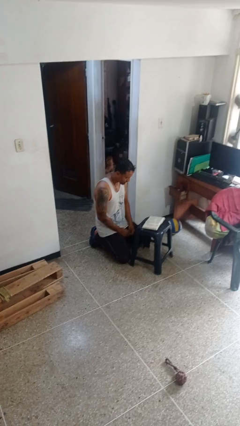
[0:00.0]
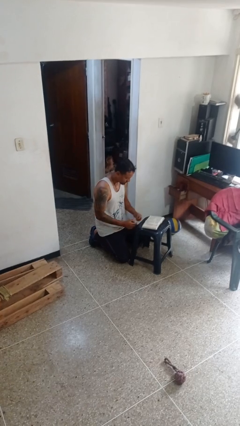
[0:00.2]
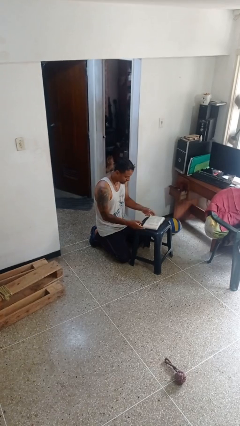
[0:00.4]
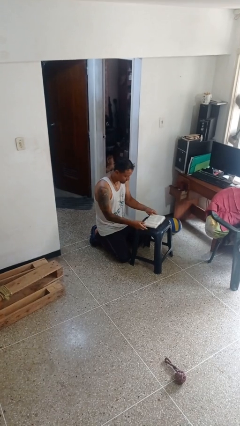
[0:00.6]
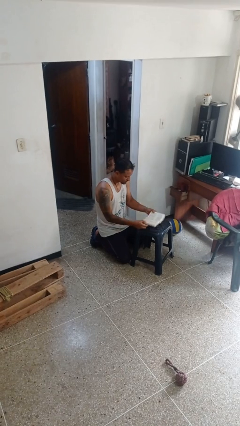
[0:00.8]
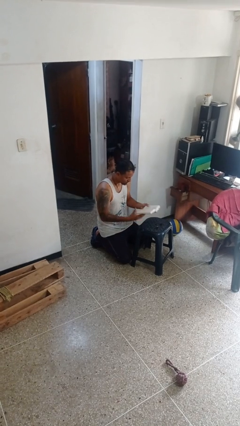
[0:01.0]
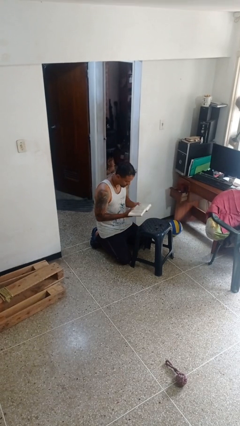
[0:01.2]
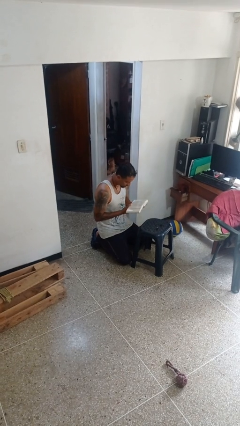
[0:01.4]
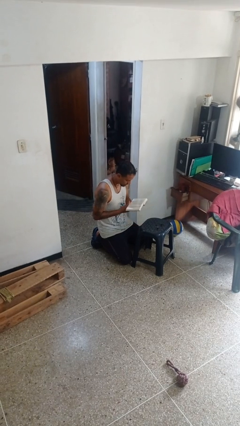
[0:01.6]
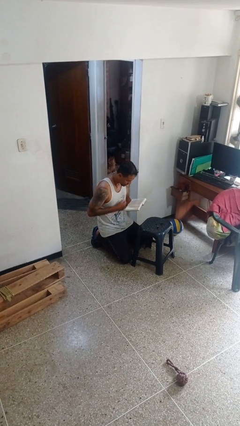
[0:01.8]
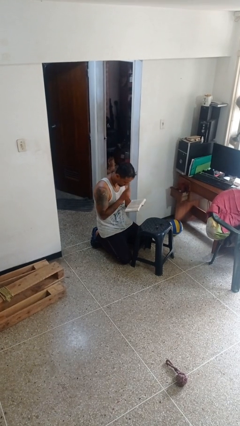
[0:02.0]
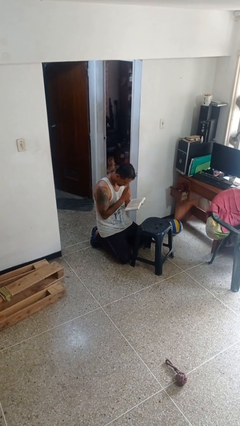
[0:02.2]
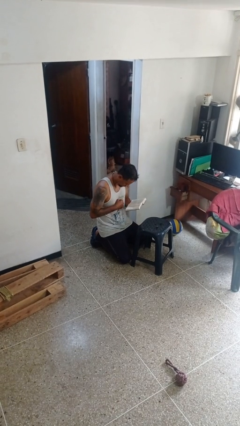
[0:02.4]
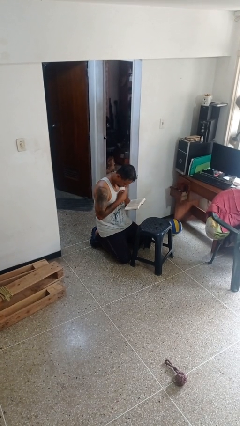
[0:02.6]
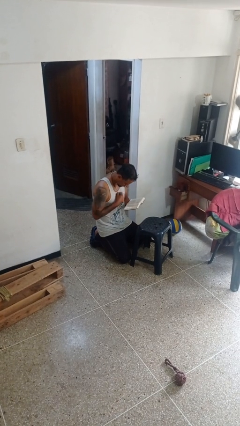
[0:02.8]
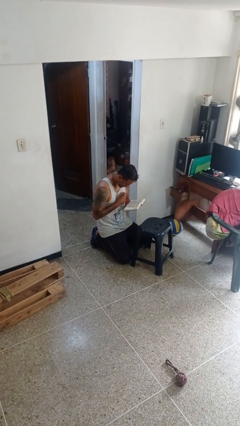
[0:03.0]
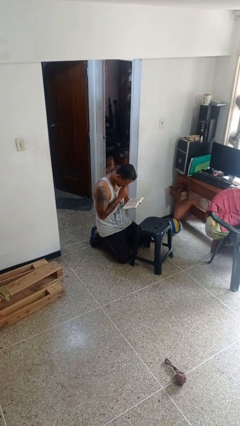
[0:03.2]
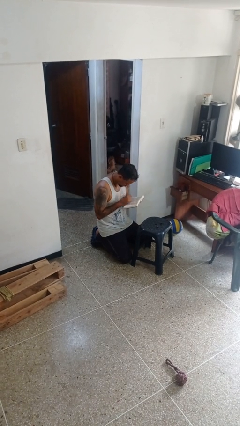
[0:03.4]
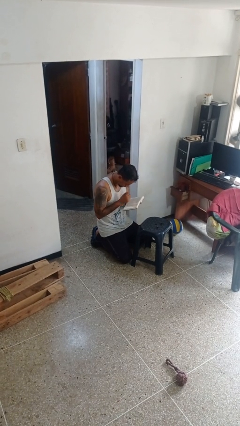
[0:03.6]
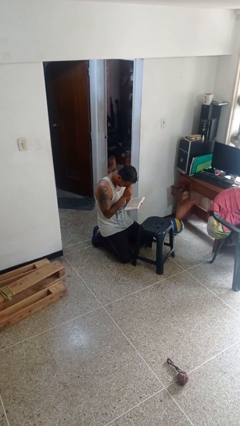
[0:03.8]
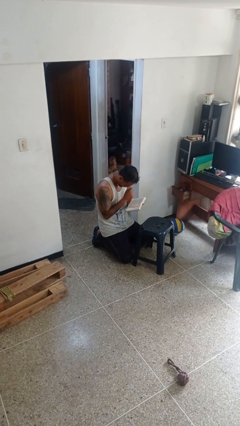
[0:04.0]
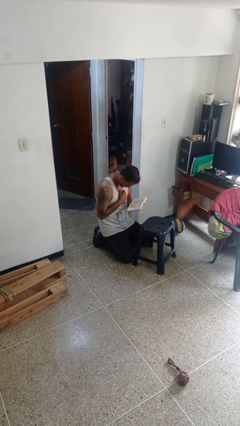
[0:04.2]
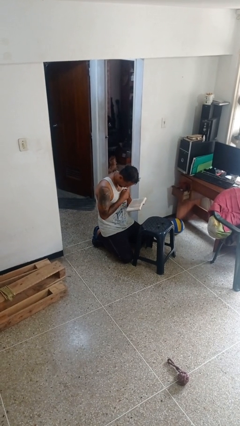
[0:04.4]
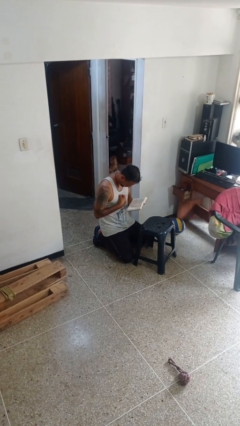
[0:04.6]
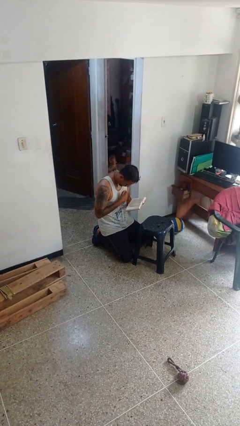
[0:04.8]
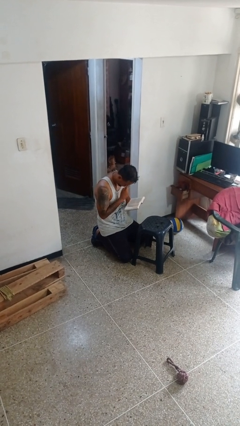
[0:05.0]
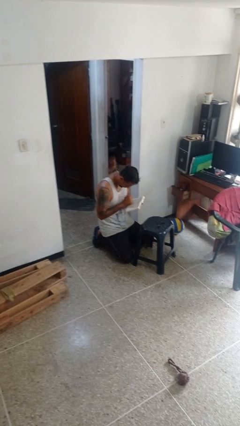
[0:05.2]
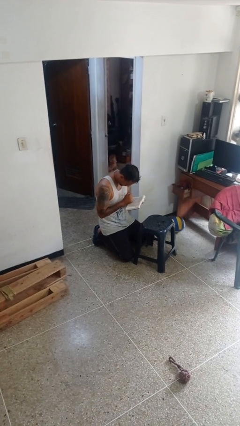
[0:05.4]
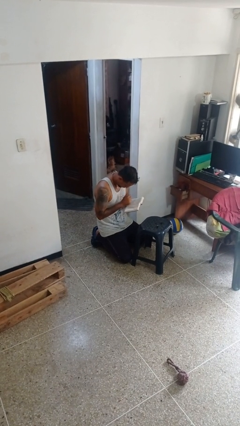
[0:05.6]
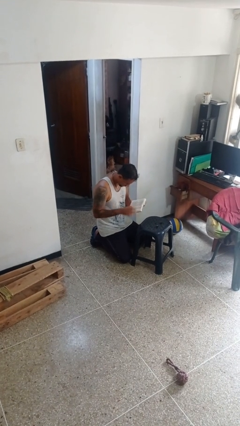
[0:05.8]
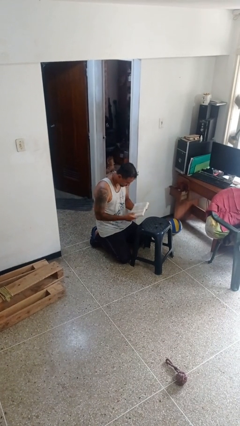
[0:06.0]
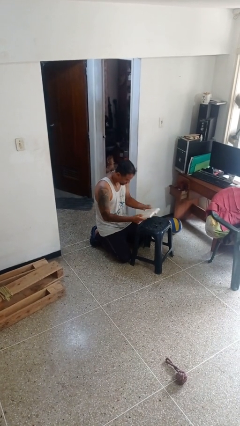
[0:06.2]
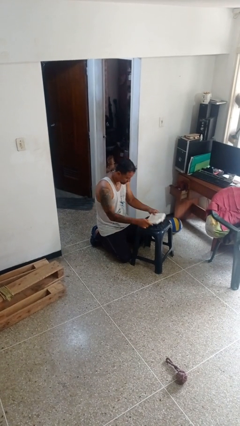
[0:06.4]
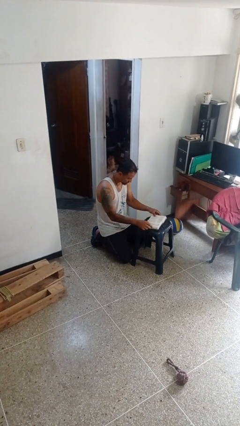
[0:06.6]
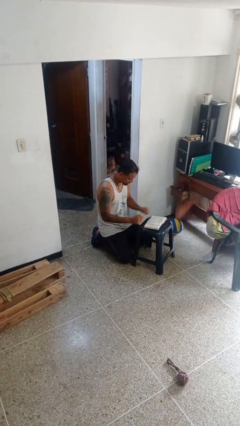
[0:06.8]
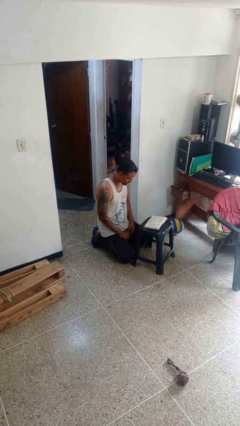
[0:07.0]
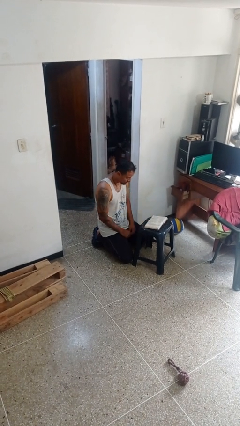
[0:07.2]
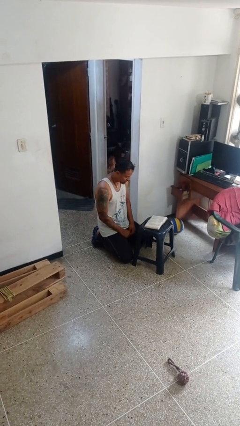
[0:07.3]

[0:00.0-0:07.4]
person prays

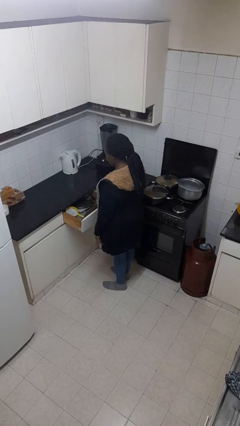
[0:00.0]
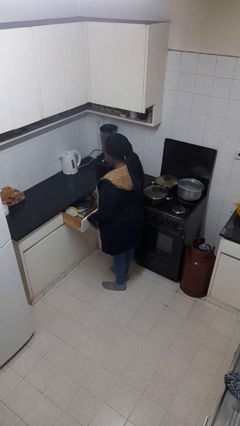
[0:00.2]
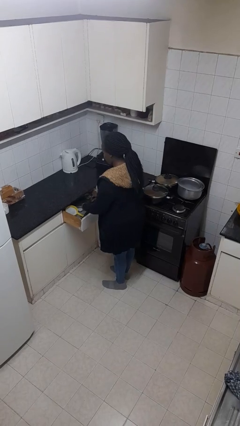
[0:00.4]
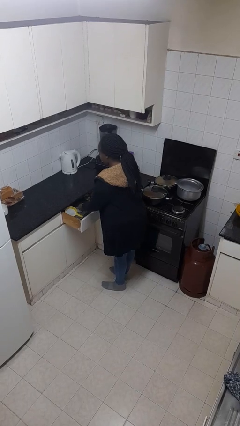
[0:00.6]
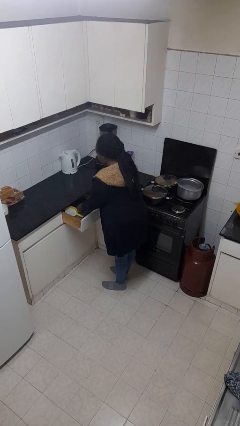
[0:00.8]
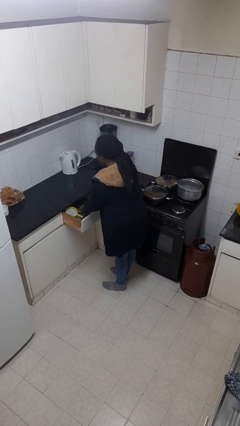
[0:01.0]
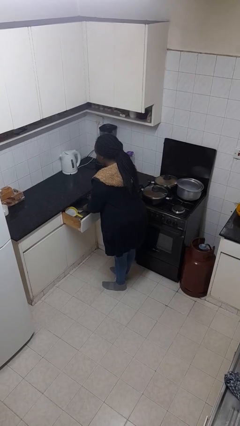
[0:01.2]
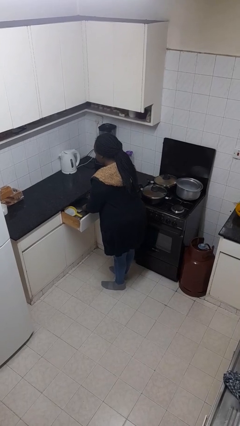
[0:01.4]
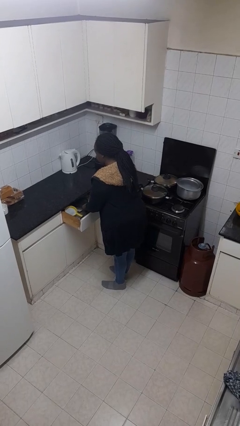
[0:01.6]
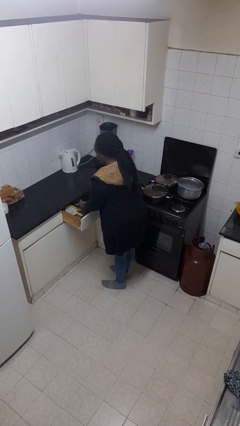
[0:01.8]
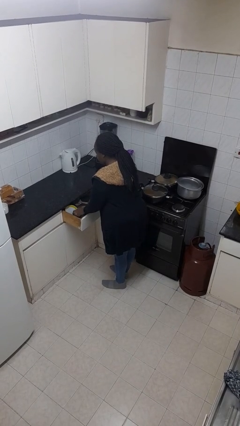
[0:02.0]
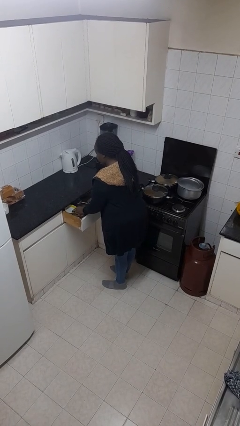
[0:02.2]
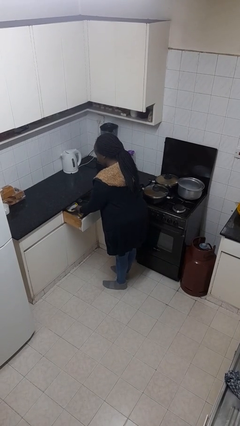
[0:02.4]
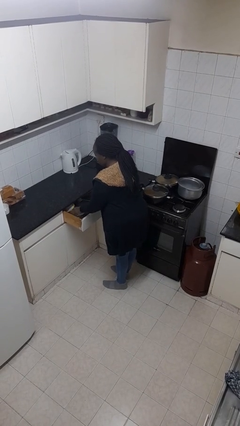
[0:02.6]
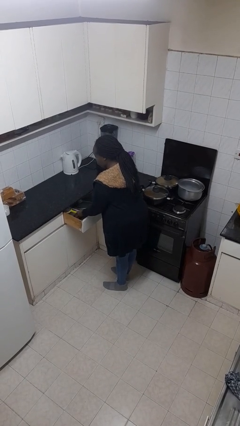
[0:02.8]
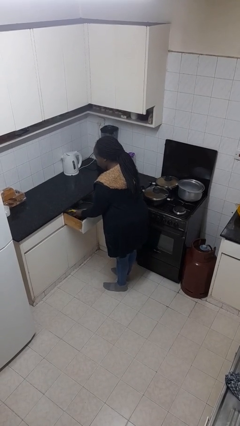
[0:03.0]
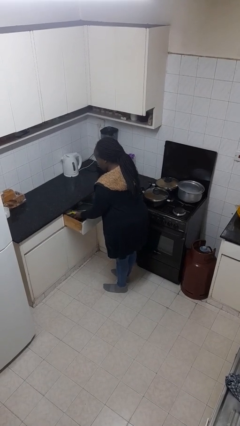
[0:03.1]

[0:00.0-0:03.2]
person searches in kitchen drawer

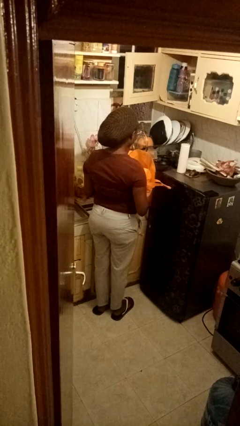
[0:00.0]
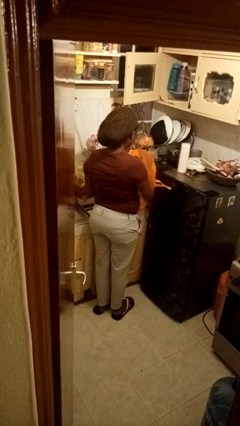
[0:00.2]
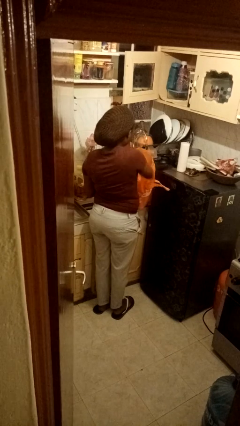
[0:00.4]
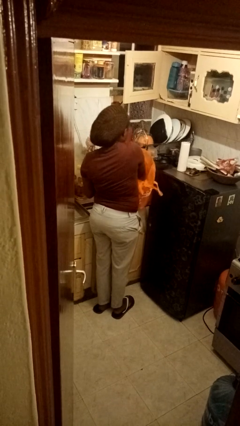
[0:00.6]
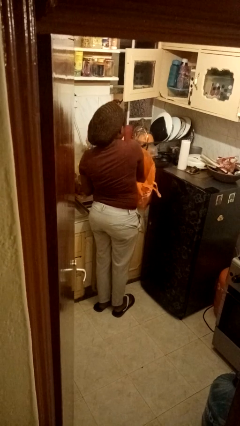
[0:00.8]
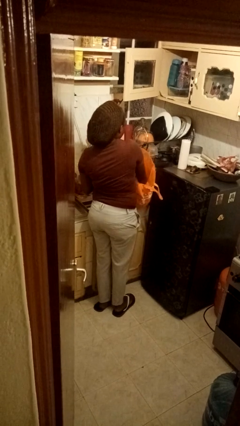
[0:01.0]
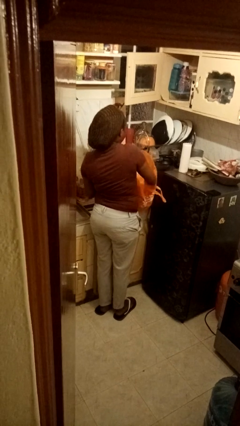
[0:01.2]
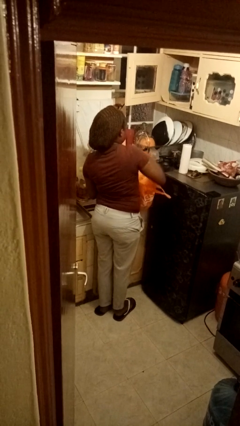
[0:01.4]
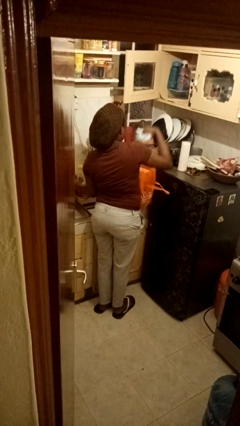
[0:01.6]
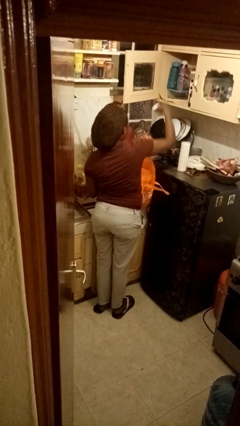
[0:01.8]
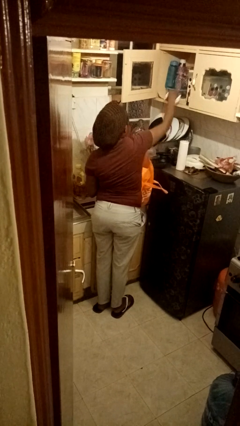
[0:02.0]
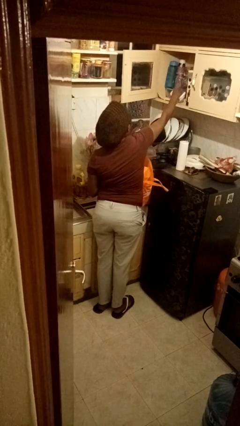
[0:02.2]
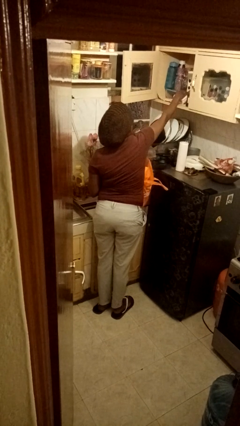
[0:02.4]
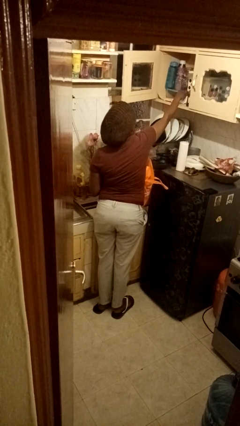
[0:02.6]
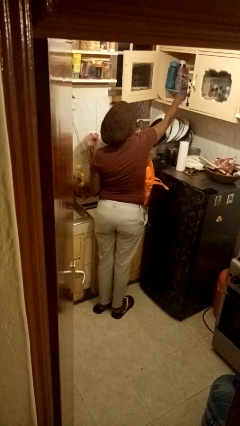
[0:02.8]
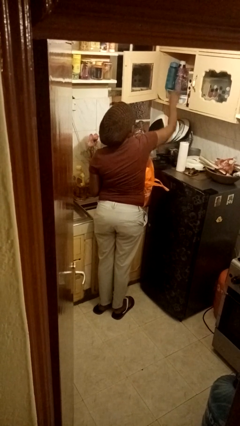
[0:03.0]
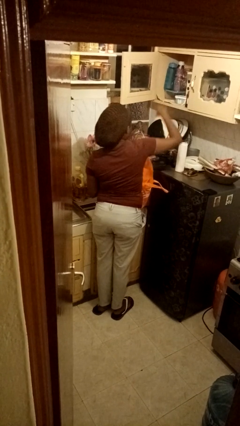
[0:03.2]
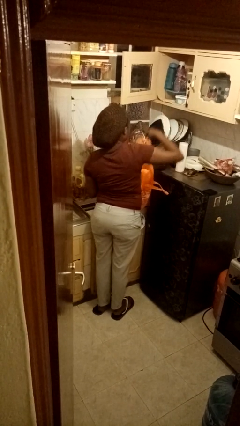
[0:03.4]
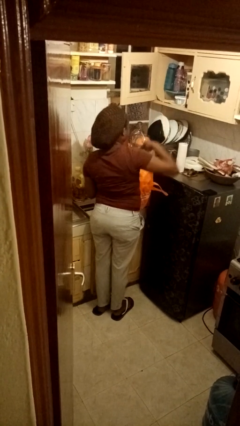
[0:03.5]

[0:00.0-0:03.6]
person loads groceries into cabinet

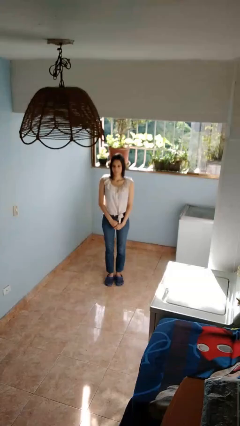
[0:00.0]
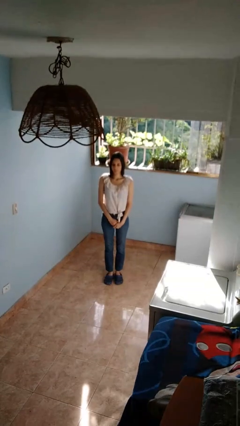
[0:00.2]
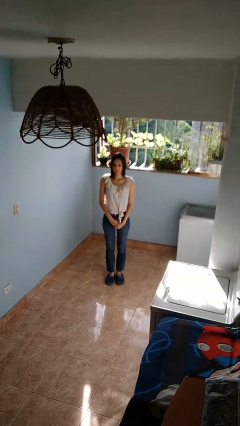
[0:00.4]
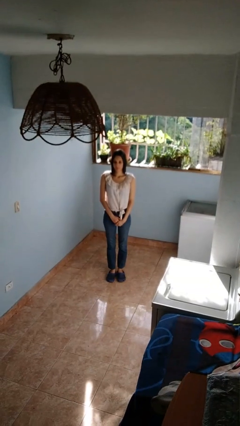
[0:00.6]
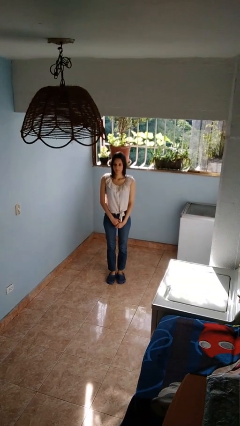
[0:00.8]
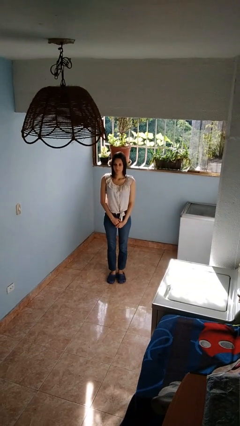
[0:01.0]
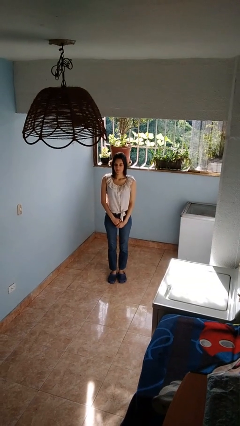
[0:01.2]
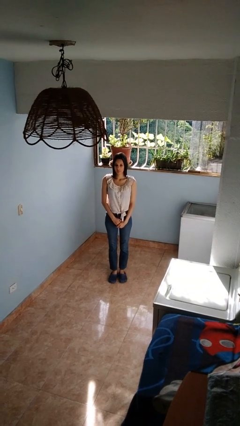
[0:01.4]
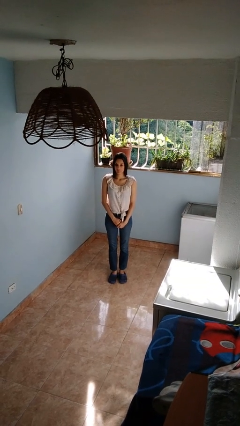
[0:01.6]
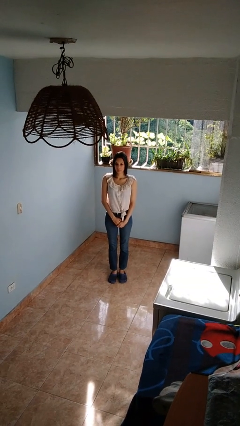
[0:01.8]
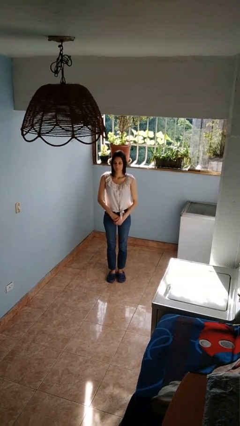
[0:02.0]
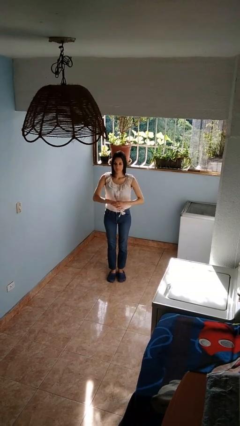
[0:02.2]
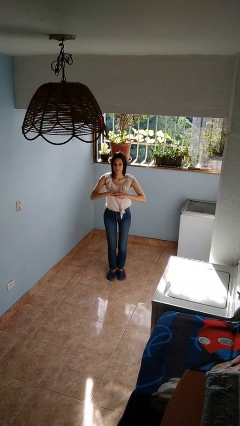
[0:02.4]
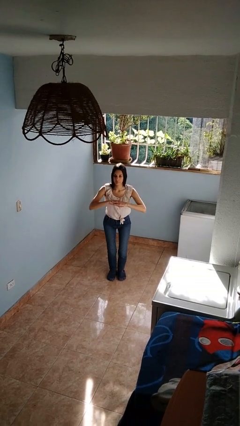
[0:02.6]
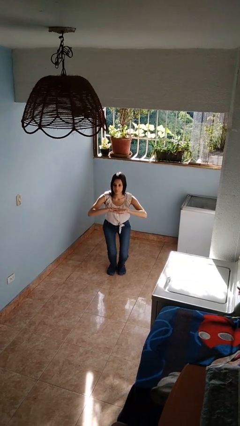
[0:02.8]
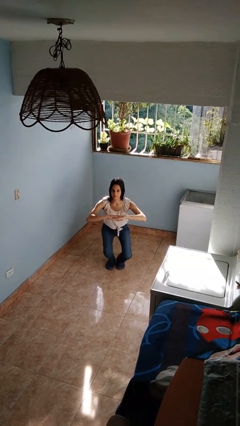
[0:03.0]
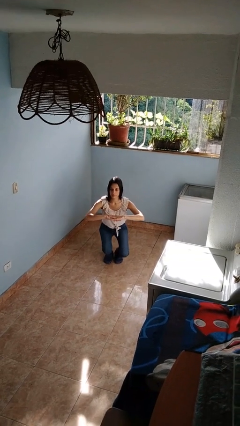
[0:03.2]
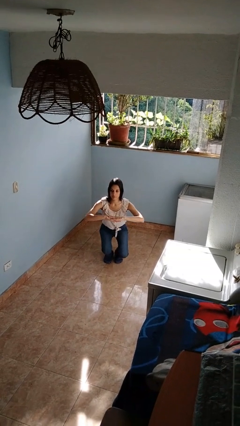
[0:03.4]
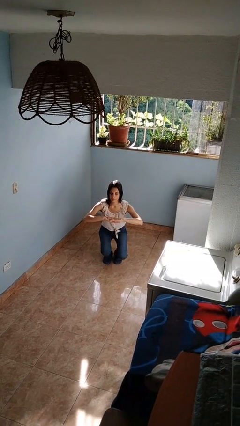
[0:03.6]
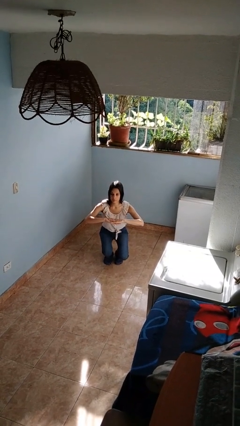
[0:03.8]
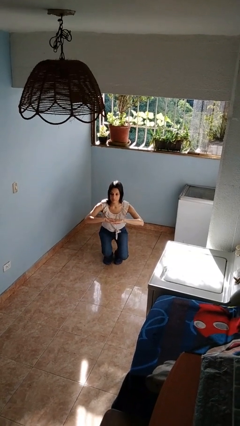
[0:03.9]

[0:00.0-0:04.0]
person squats
